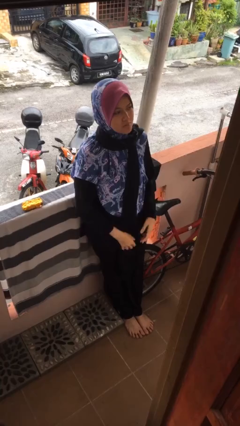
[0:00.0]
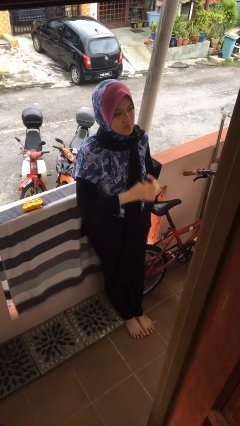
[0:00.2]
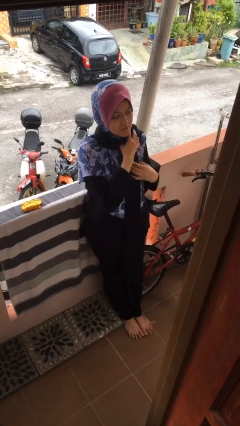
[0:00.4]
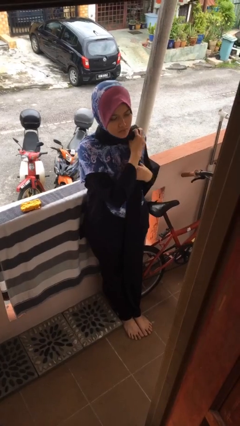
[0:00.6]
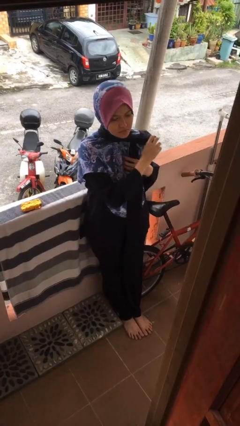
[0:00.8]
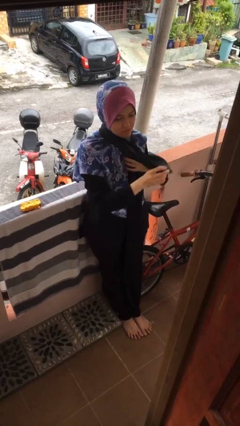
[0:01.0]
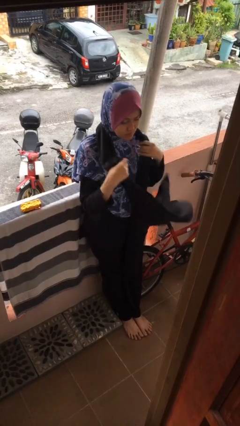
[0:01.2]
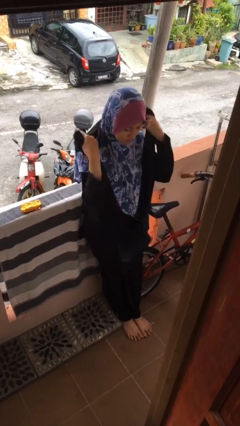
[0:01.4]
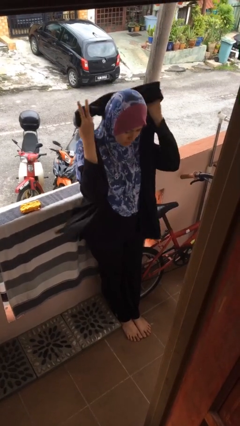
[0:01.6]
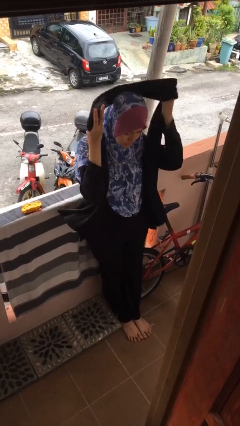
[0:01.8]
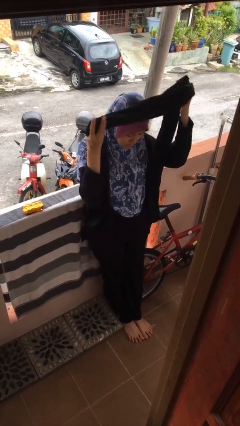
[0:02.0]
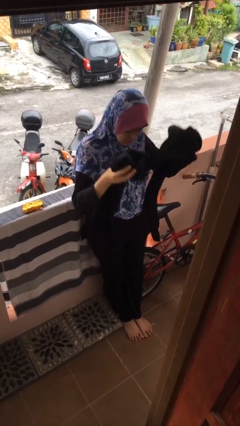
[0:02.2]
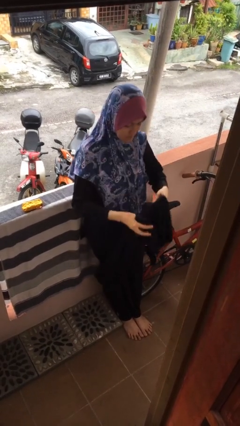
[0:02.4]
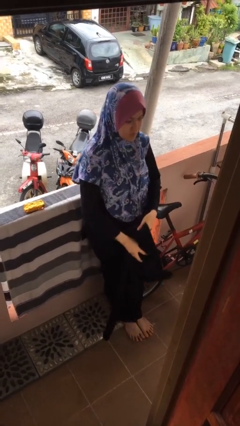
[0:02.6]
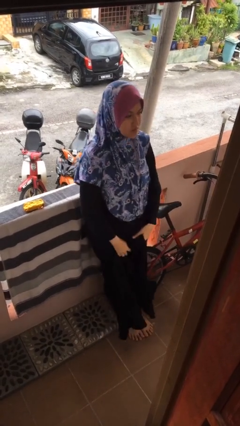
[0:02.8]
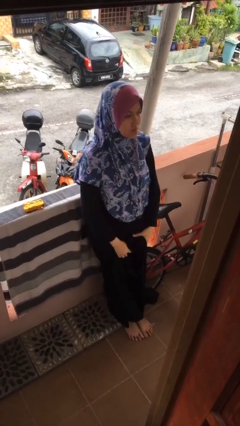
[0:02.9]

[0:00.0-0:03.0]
person takes off scarf

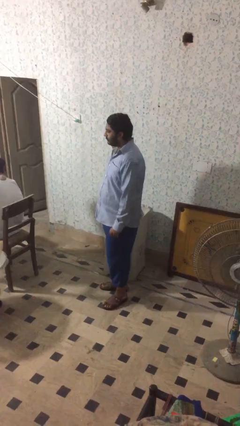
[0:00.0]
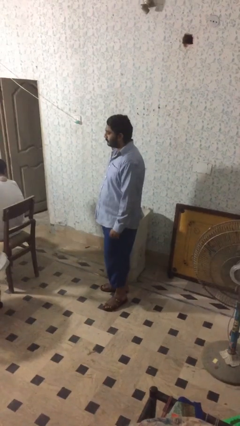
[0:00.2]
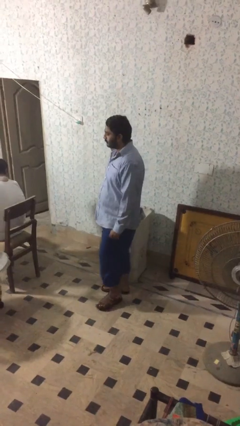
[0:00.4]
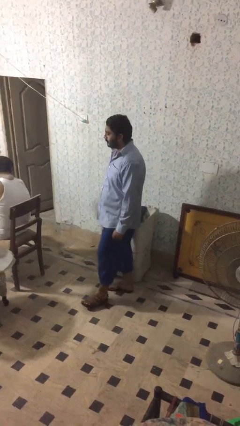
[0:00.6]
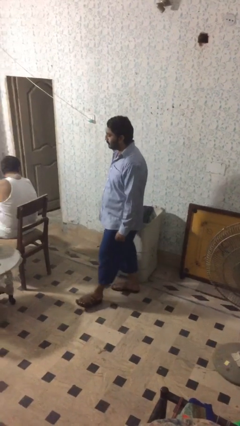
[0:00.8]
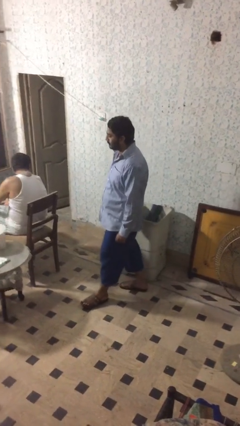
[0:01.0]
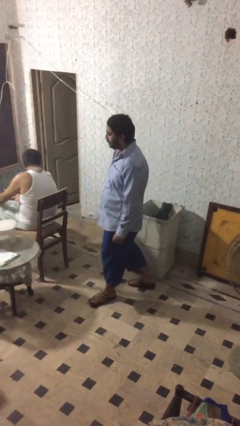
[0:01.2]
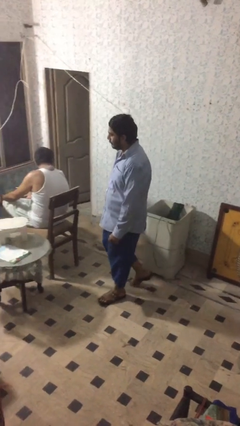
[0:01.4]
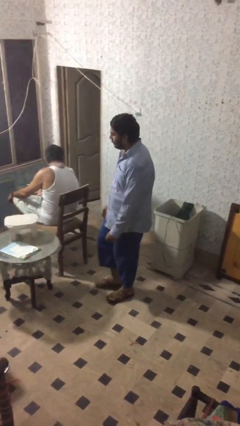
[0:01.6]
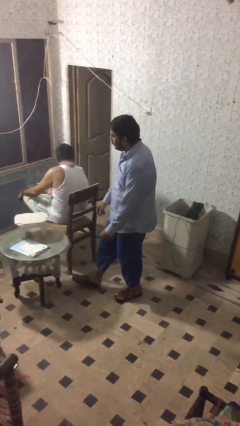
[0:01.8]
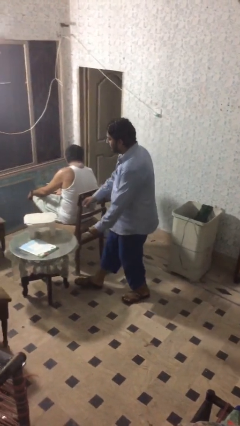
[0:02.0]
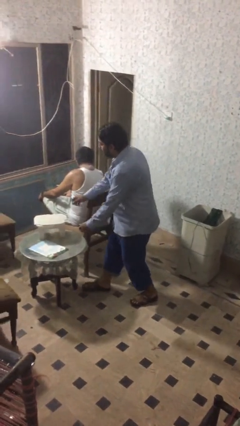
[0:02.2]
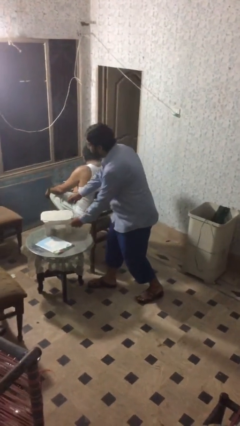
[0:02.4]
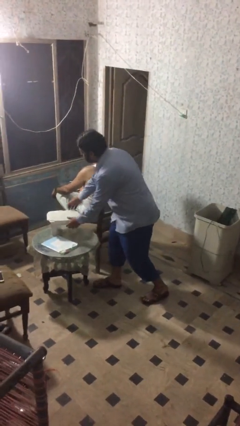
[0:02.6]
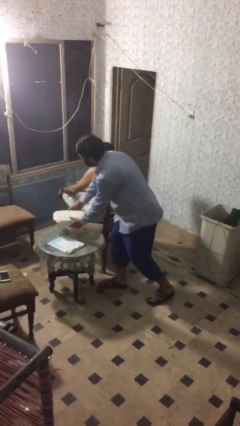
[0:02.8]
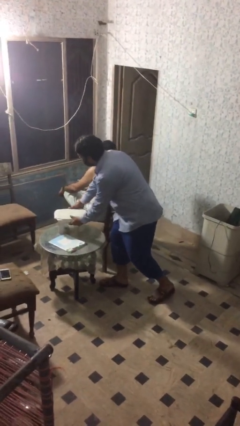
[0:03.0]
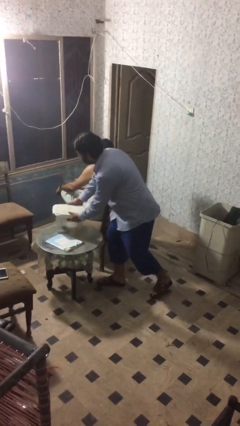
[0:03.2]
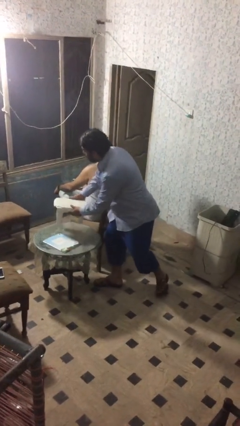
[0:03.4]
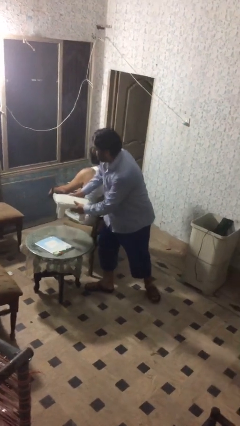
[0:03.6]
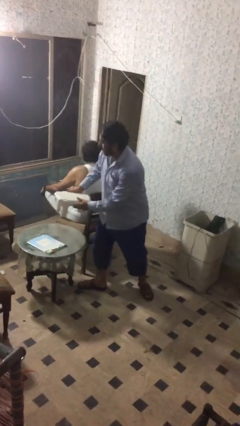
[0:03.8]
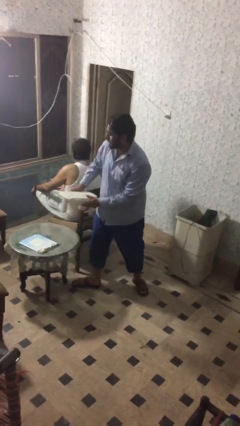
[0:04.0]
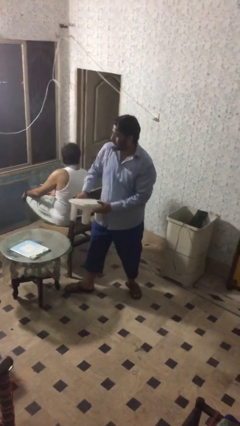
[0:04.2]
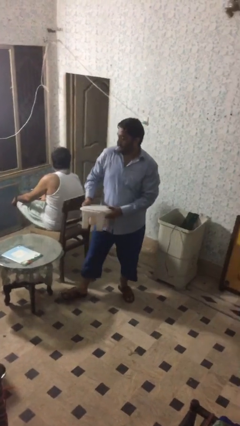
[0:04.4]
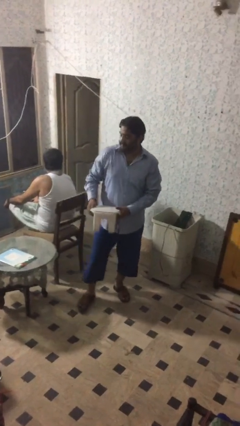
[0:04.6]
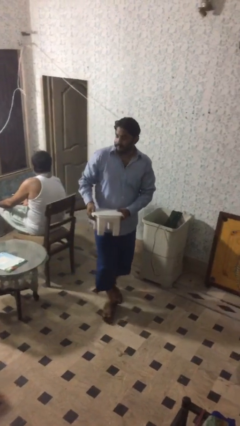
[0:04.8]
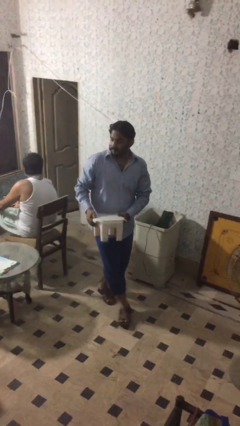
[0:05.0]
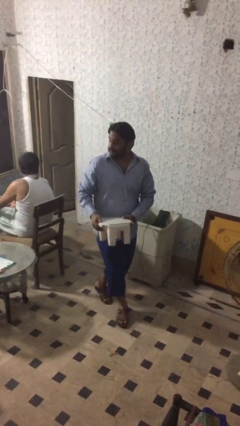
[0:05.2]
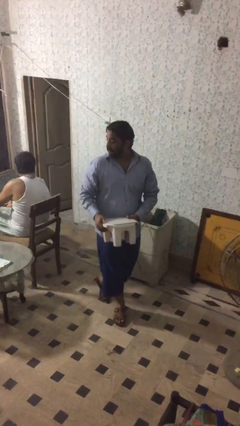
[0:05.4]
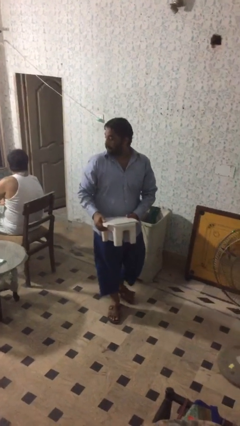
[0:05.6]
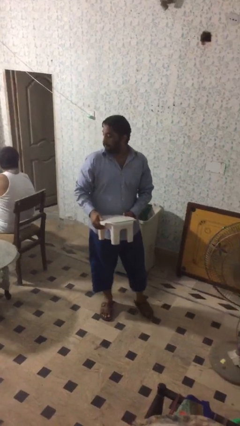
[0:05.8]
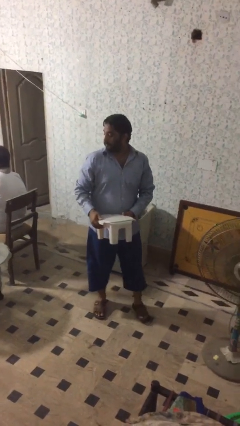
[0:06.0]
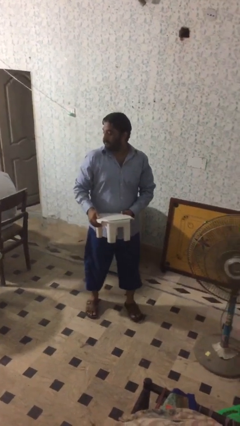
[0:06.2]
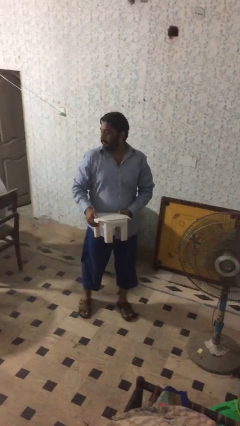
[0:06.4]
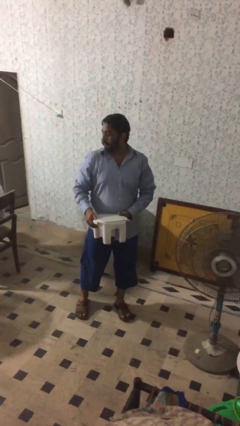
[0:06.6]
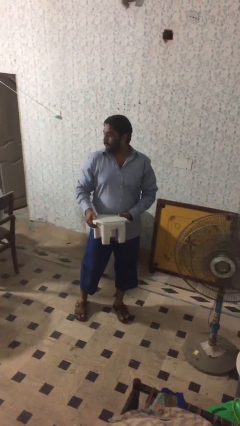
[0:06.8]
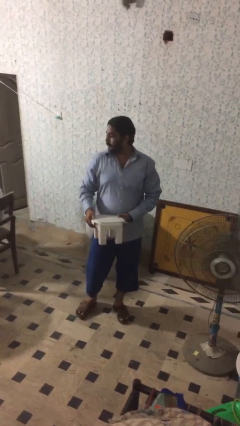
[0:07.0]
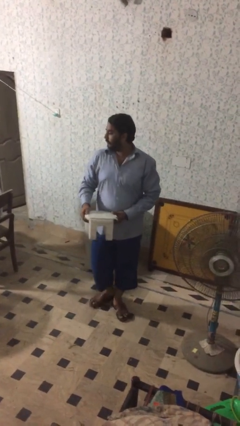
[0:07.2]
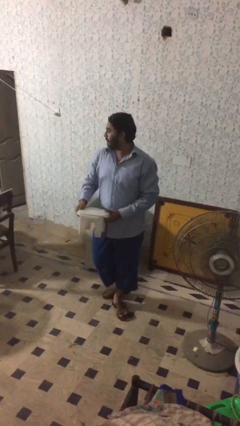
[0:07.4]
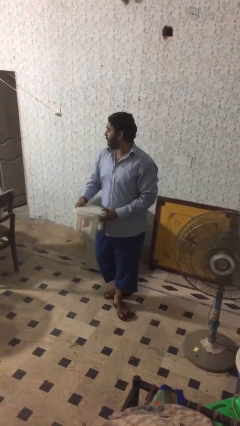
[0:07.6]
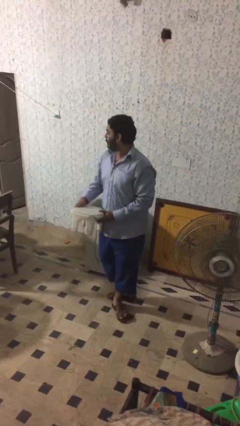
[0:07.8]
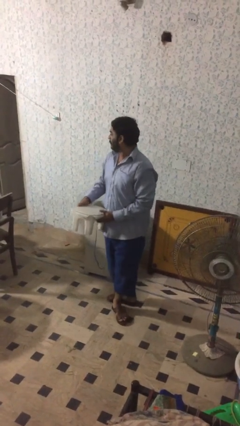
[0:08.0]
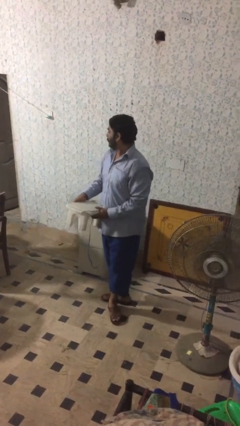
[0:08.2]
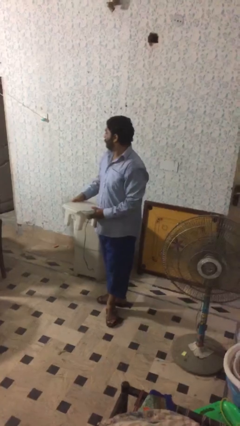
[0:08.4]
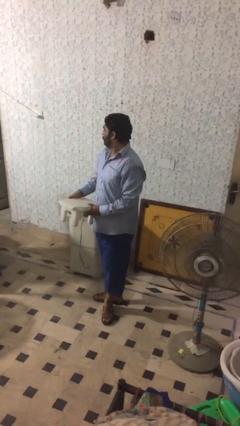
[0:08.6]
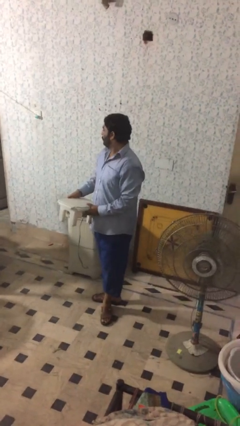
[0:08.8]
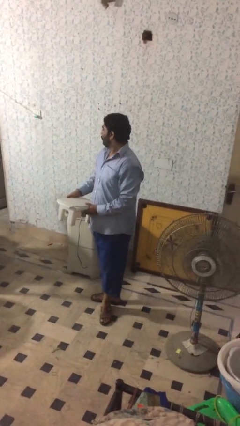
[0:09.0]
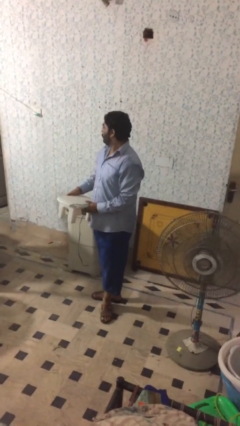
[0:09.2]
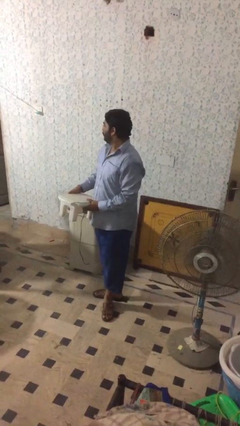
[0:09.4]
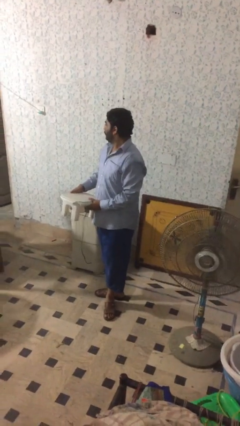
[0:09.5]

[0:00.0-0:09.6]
person steals object from person

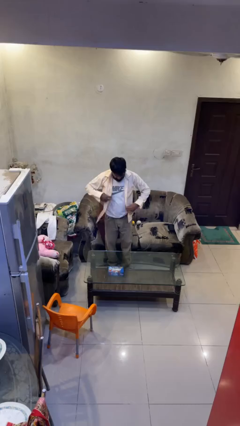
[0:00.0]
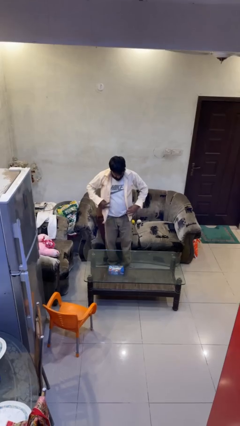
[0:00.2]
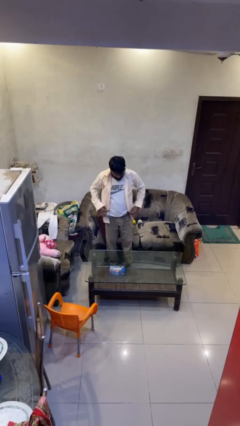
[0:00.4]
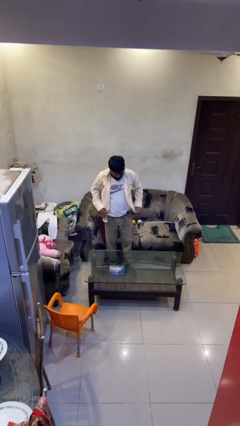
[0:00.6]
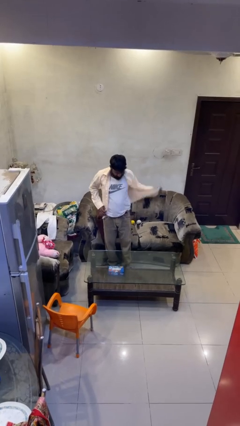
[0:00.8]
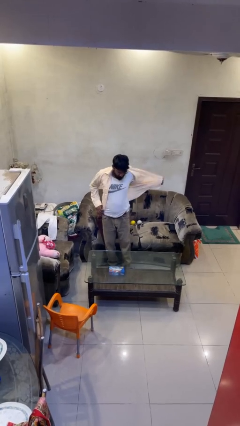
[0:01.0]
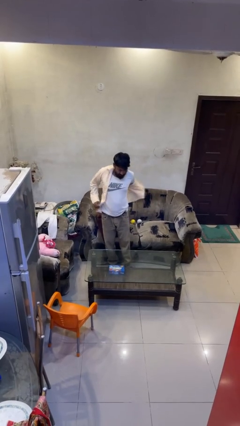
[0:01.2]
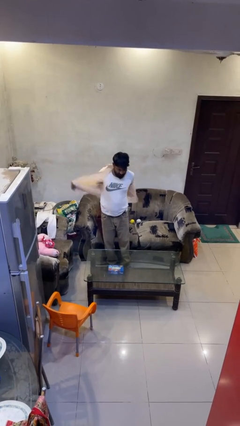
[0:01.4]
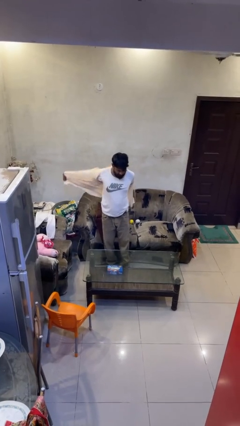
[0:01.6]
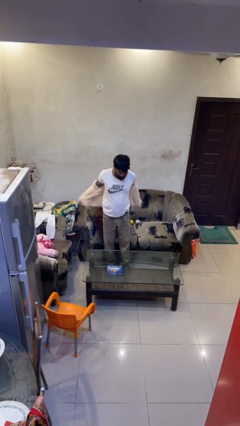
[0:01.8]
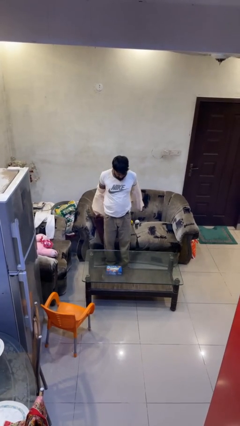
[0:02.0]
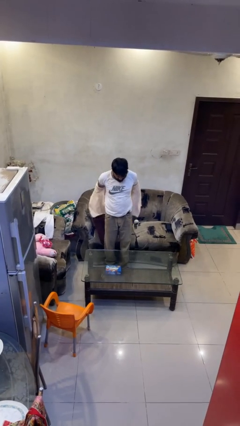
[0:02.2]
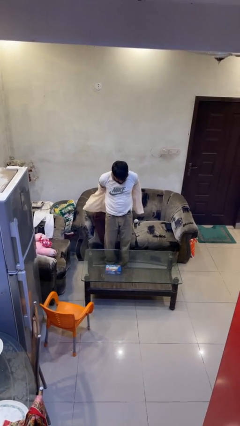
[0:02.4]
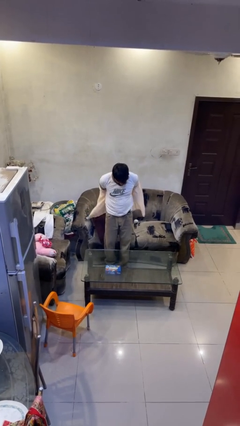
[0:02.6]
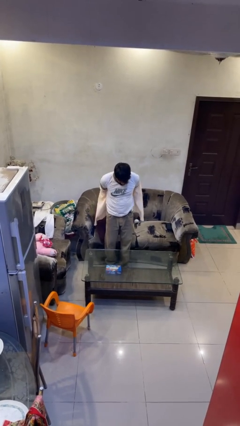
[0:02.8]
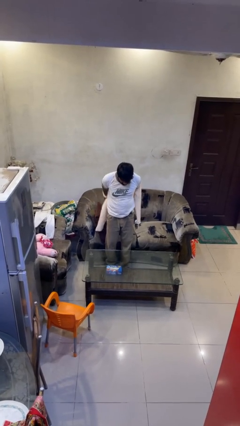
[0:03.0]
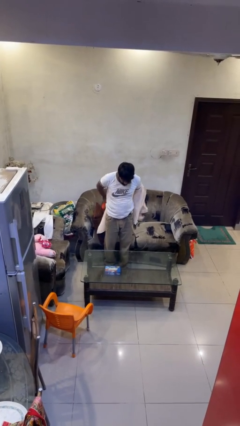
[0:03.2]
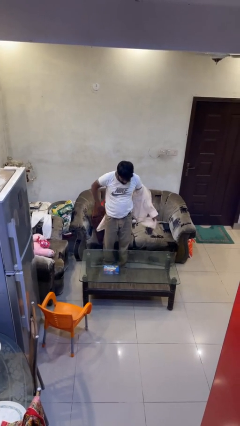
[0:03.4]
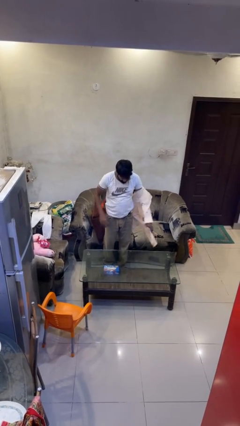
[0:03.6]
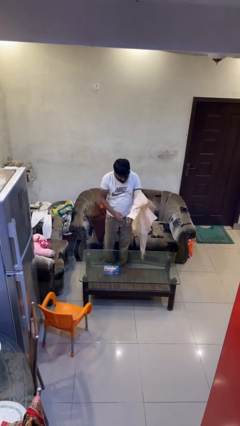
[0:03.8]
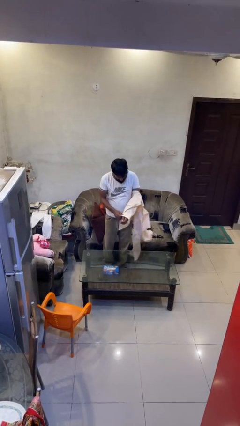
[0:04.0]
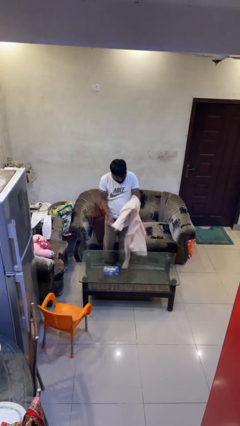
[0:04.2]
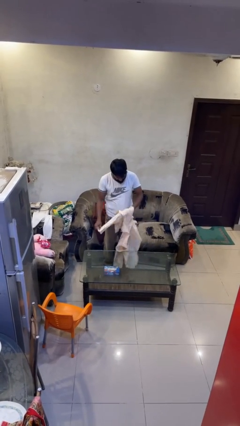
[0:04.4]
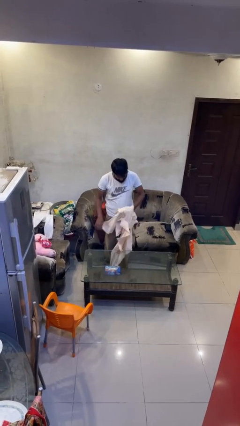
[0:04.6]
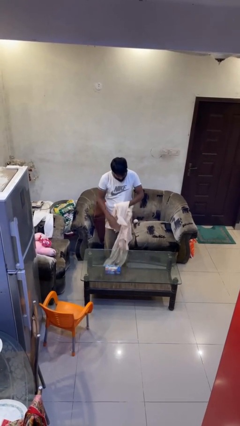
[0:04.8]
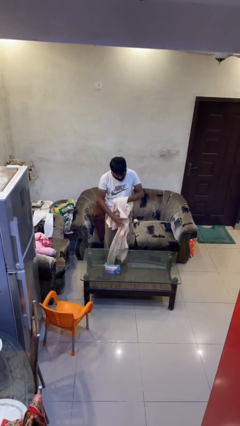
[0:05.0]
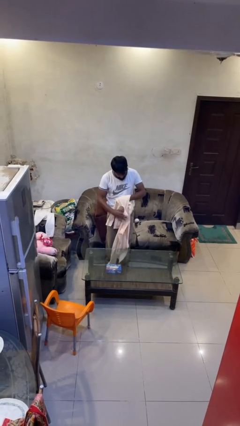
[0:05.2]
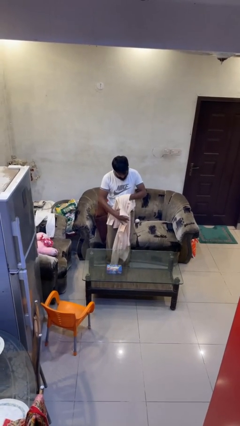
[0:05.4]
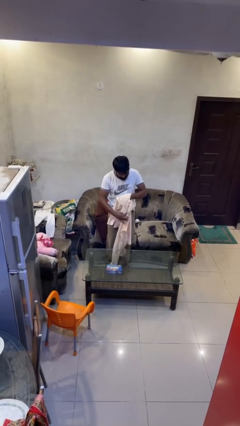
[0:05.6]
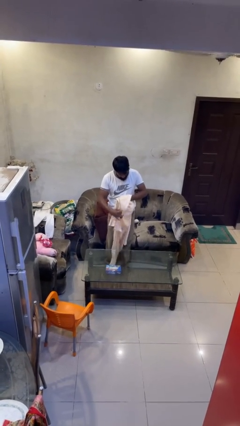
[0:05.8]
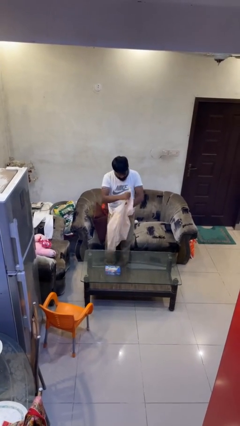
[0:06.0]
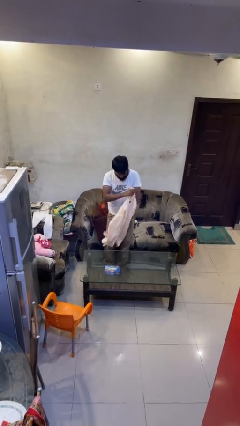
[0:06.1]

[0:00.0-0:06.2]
person takes off shirt
